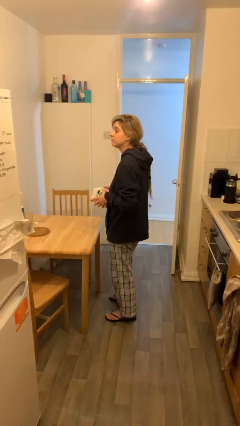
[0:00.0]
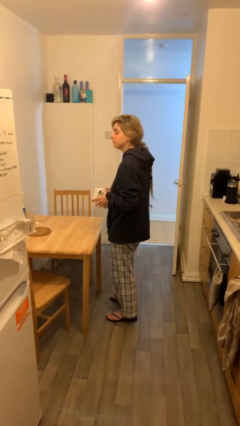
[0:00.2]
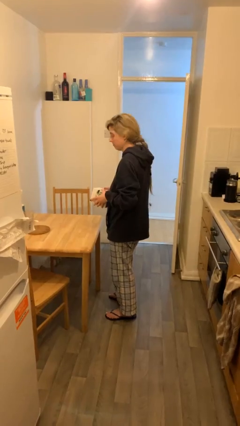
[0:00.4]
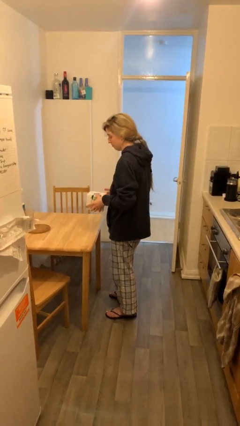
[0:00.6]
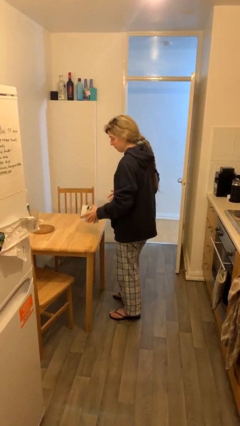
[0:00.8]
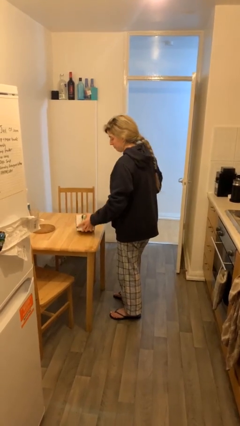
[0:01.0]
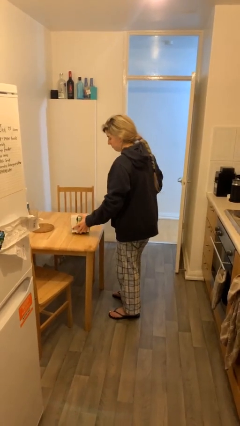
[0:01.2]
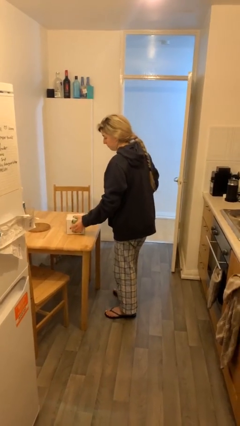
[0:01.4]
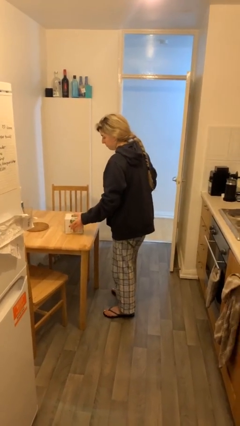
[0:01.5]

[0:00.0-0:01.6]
person puts down object on table

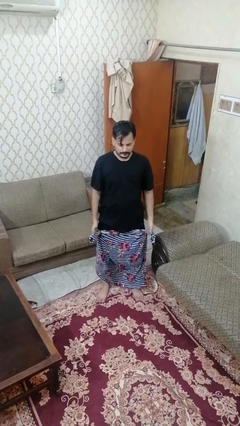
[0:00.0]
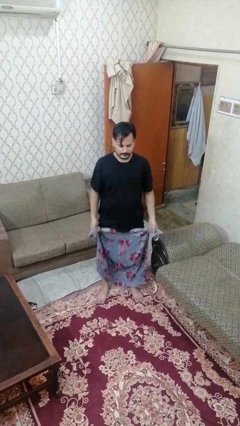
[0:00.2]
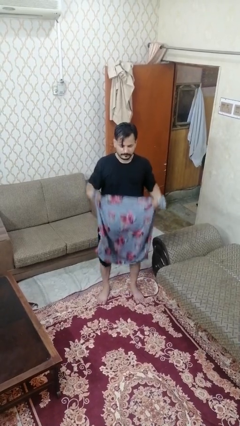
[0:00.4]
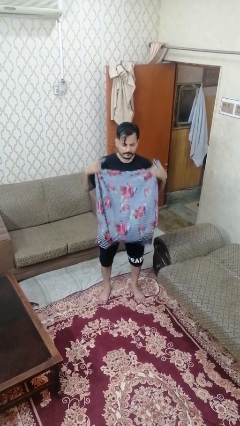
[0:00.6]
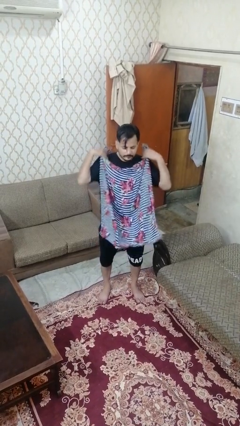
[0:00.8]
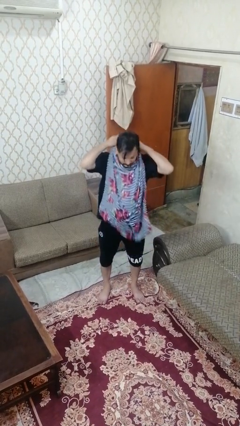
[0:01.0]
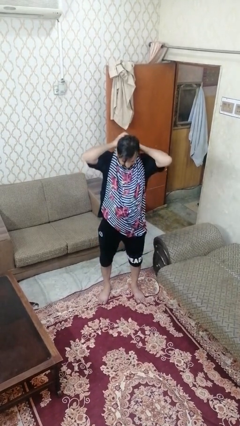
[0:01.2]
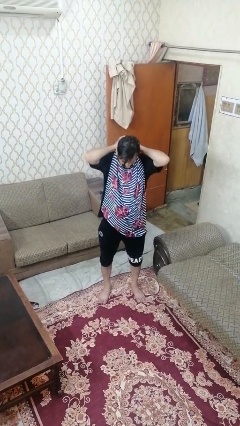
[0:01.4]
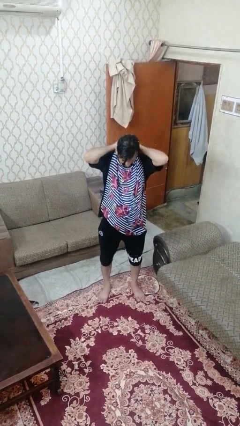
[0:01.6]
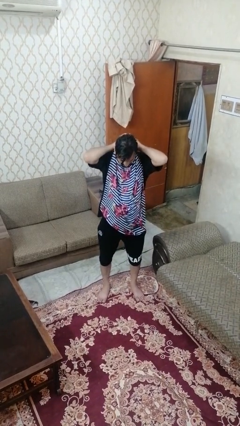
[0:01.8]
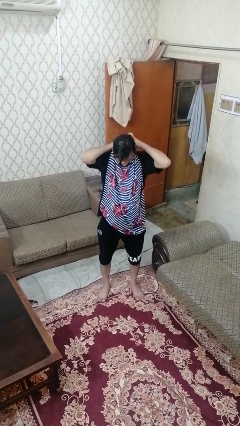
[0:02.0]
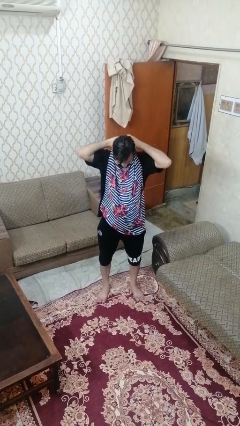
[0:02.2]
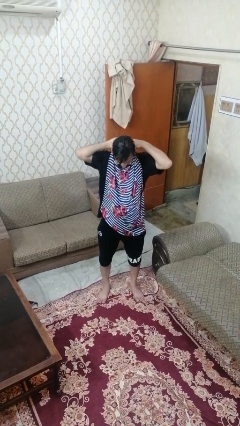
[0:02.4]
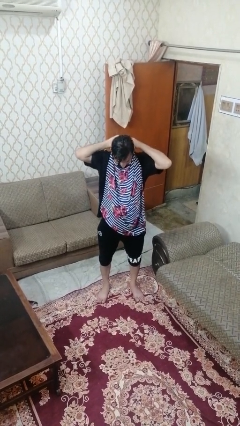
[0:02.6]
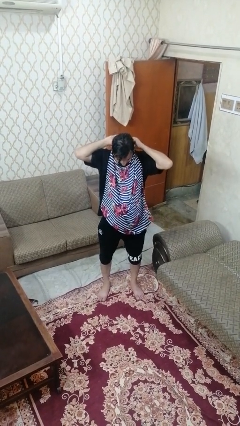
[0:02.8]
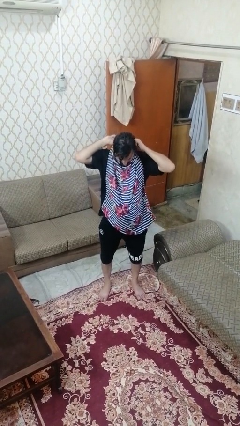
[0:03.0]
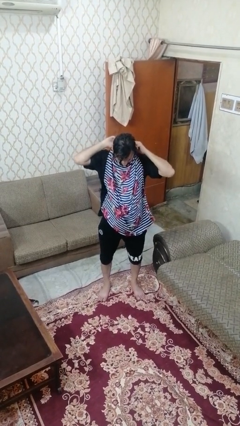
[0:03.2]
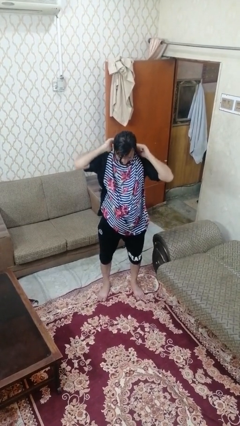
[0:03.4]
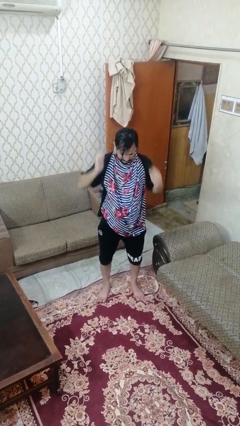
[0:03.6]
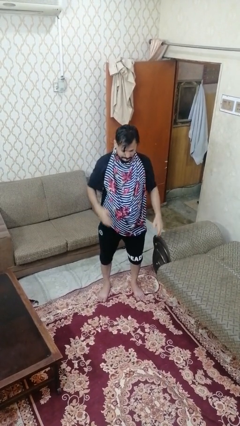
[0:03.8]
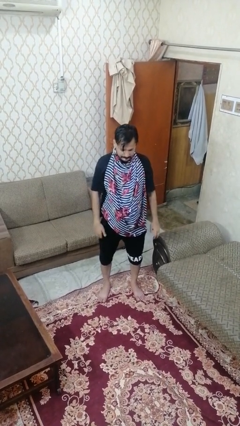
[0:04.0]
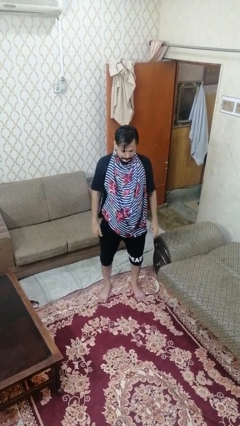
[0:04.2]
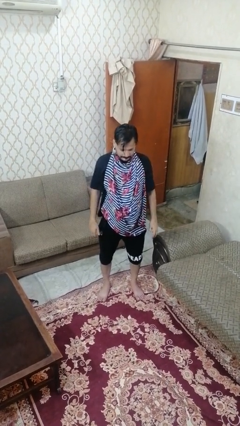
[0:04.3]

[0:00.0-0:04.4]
person puts on apron

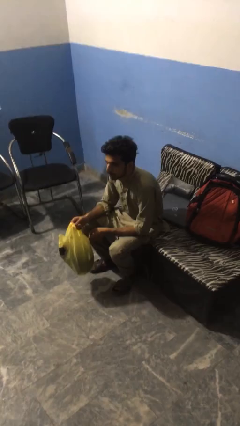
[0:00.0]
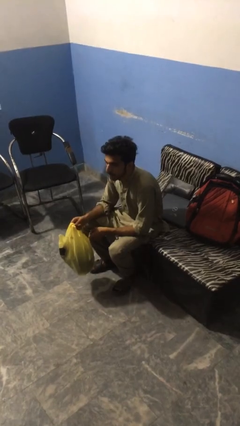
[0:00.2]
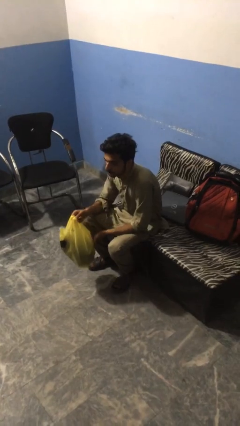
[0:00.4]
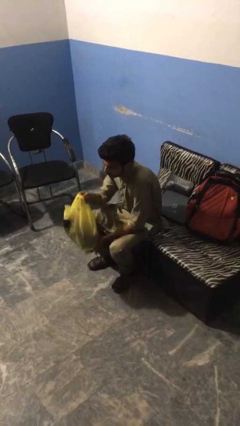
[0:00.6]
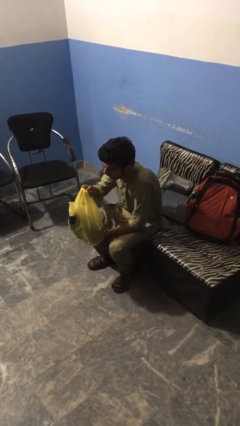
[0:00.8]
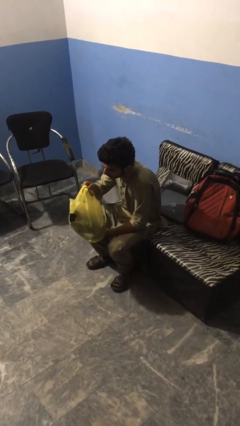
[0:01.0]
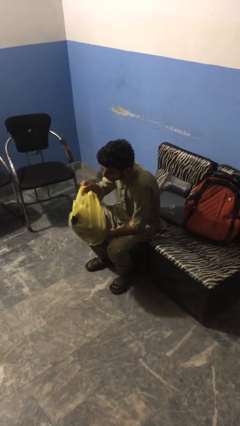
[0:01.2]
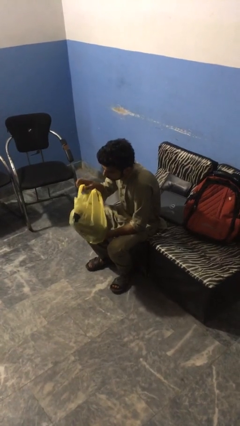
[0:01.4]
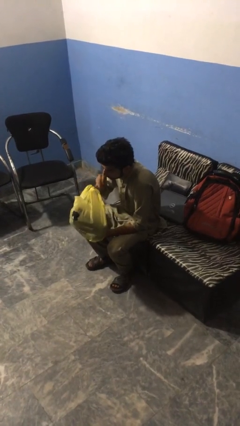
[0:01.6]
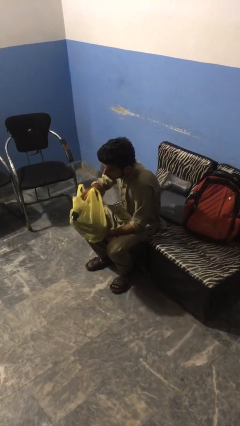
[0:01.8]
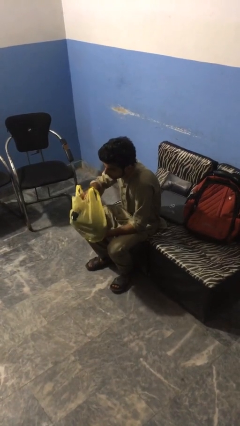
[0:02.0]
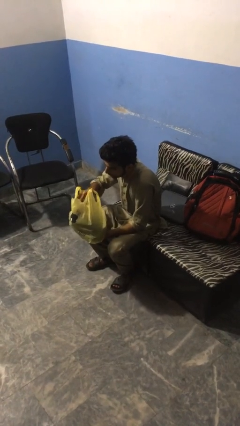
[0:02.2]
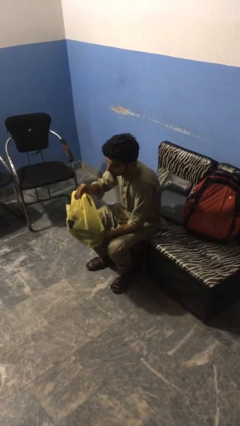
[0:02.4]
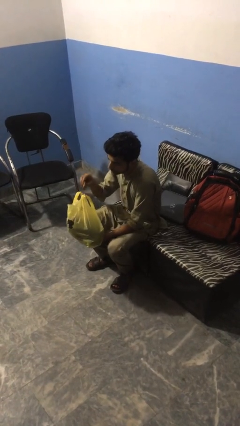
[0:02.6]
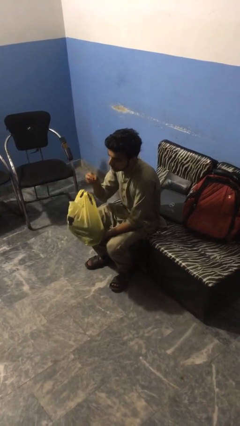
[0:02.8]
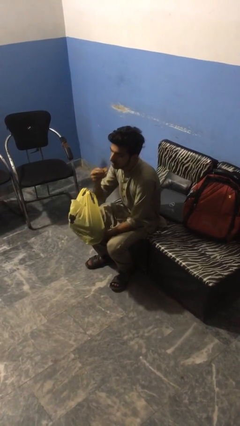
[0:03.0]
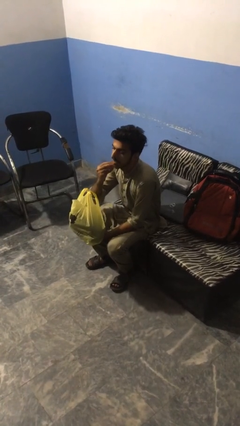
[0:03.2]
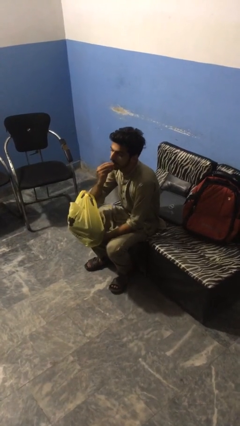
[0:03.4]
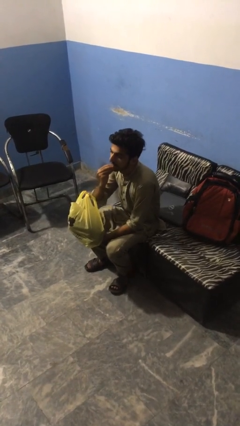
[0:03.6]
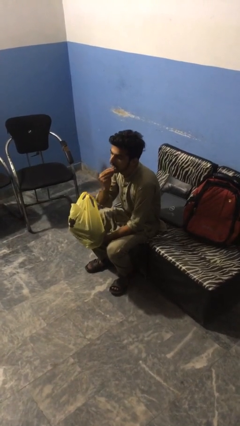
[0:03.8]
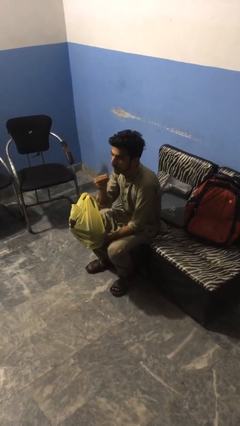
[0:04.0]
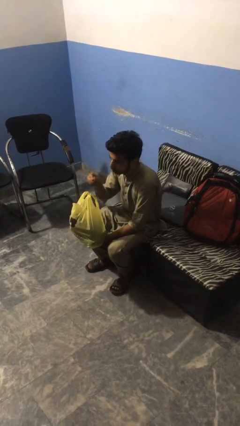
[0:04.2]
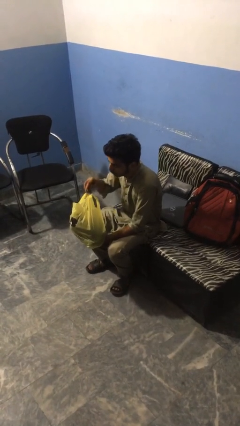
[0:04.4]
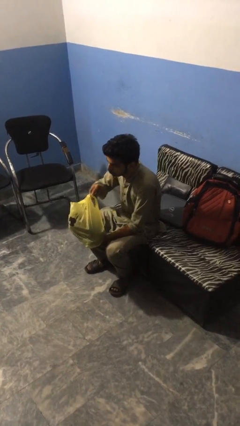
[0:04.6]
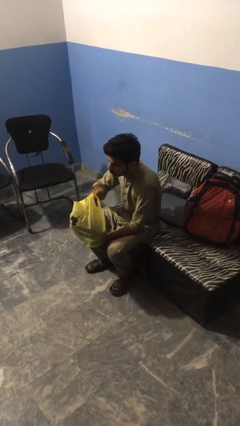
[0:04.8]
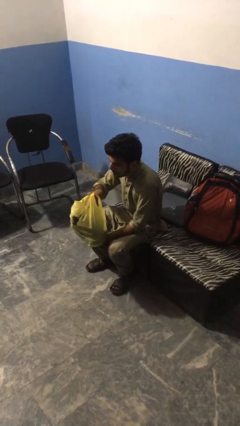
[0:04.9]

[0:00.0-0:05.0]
person eats snack from bag

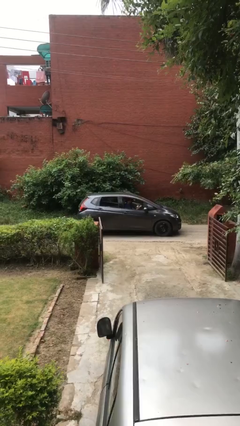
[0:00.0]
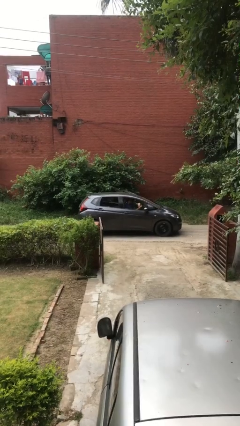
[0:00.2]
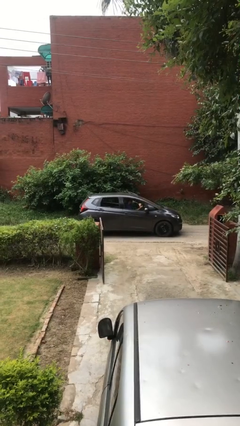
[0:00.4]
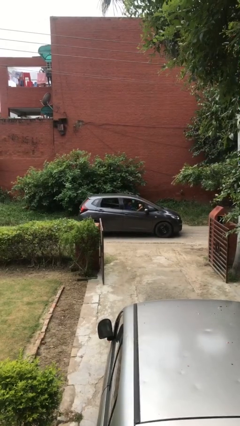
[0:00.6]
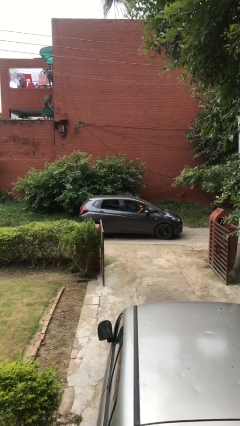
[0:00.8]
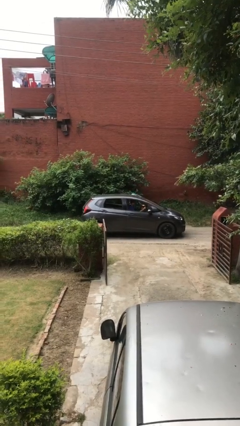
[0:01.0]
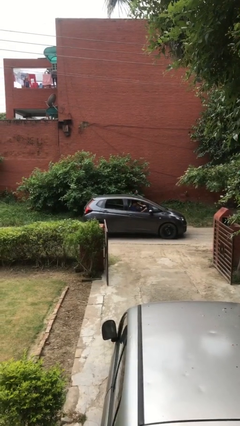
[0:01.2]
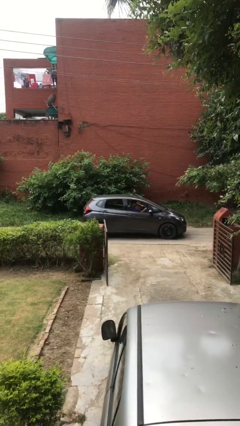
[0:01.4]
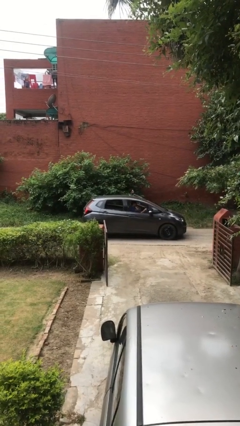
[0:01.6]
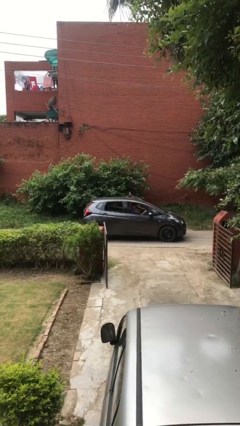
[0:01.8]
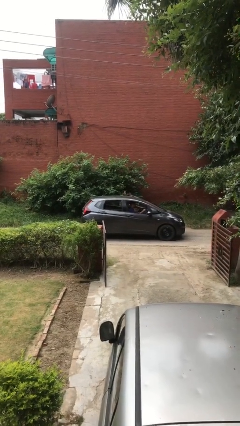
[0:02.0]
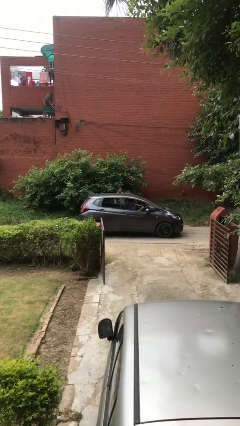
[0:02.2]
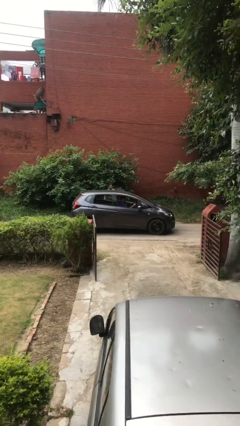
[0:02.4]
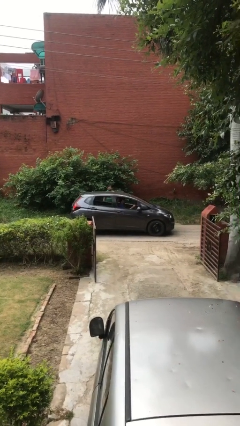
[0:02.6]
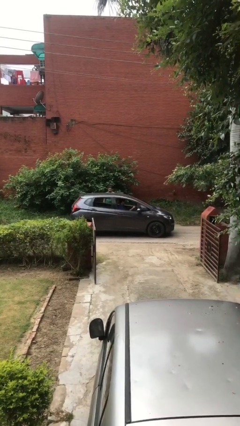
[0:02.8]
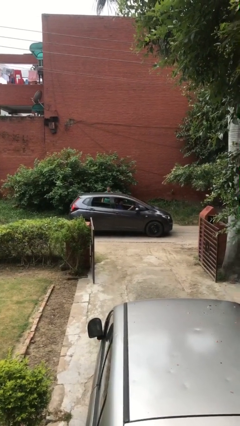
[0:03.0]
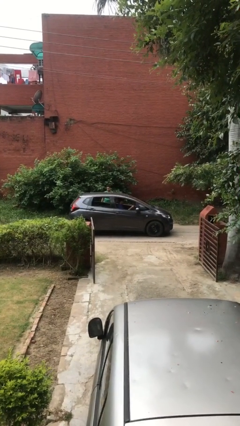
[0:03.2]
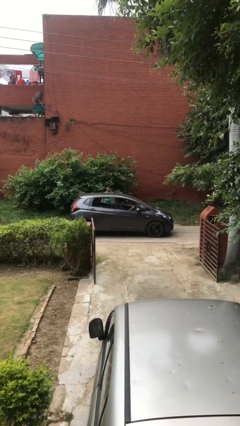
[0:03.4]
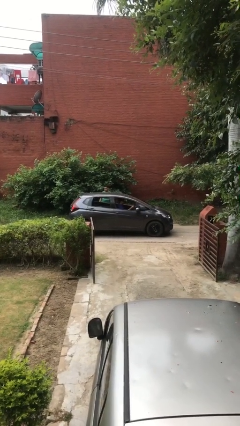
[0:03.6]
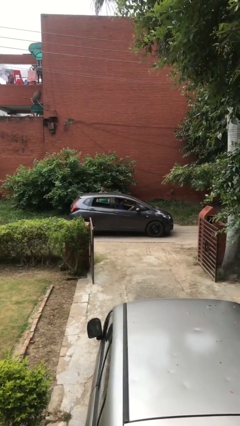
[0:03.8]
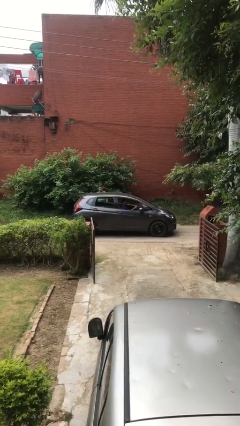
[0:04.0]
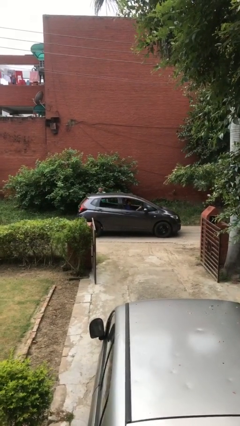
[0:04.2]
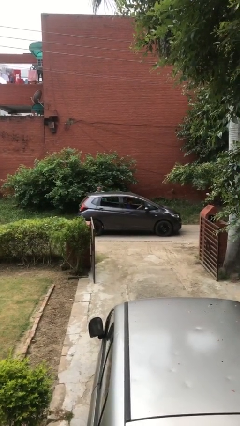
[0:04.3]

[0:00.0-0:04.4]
car drops off person

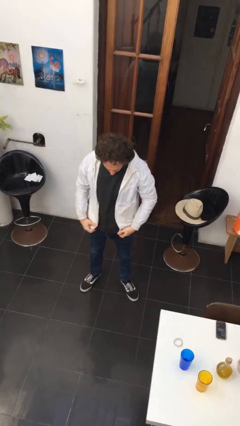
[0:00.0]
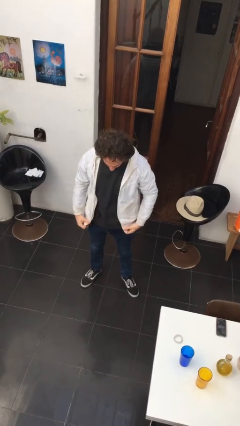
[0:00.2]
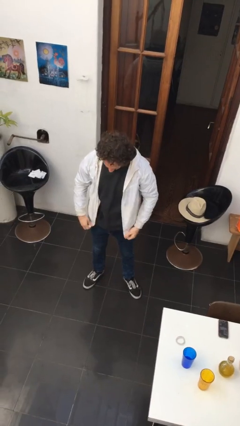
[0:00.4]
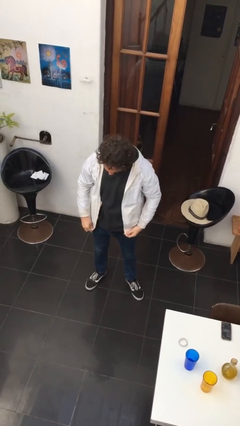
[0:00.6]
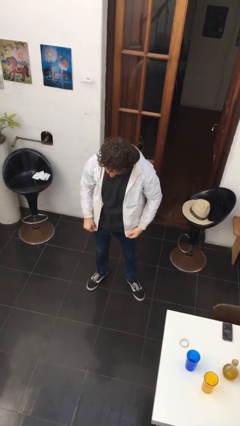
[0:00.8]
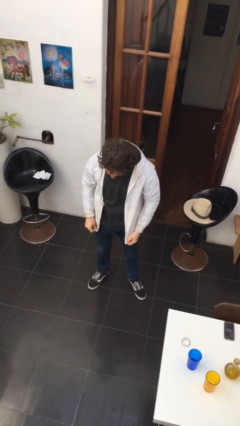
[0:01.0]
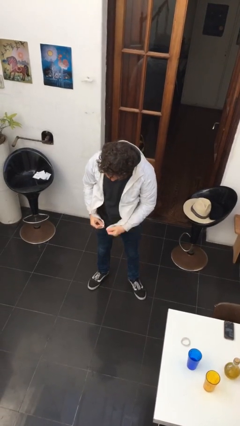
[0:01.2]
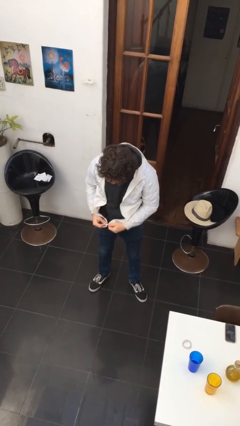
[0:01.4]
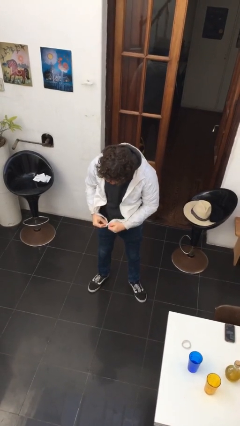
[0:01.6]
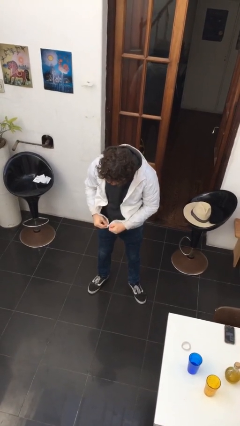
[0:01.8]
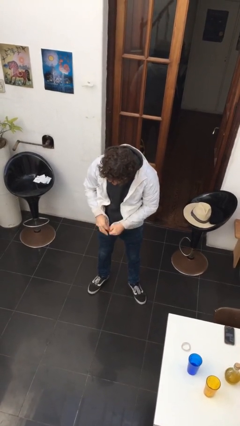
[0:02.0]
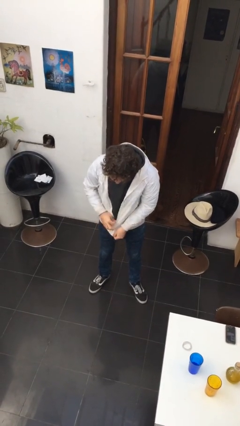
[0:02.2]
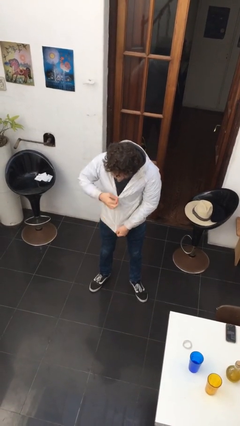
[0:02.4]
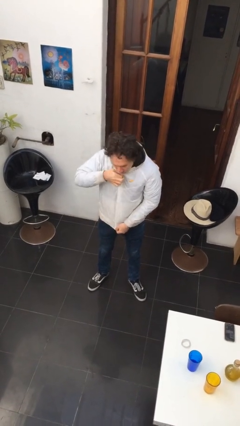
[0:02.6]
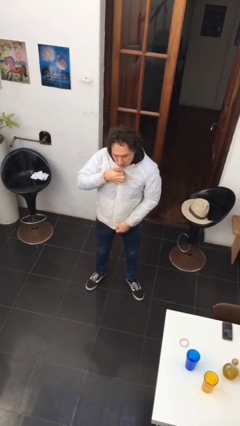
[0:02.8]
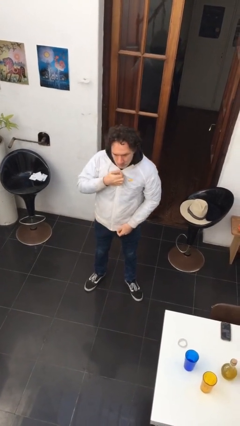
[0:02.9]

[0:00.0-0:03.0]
person zips up jacket
